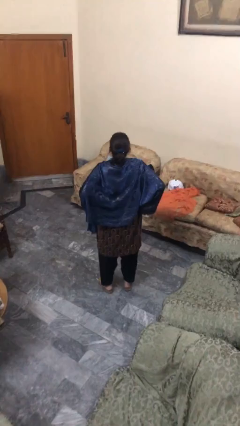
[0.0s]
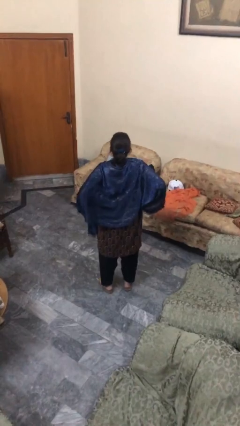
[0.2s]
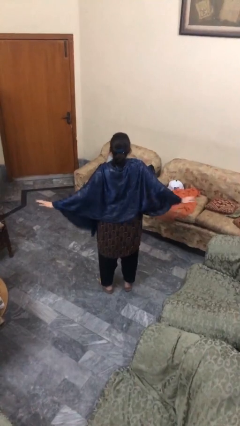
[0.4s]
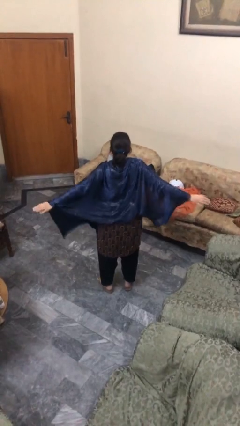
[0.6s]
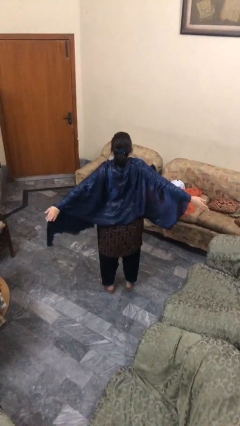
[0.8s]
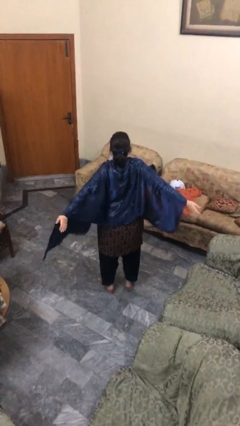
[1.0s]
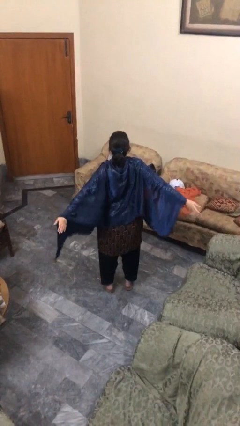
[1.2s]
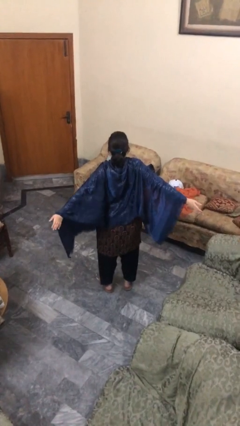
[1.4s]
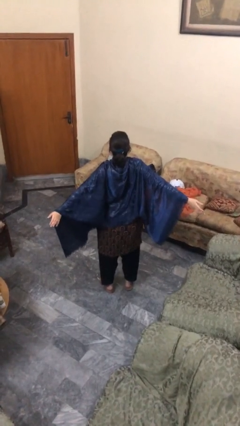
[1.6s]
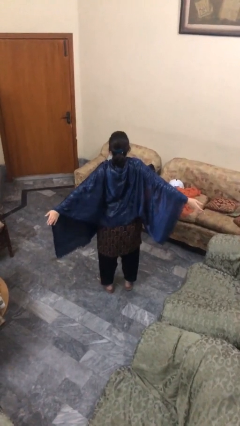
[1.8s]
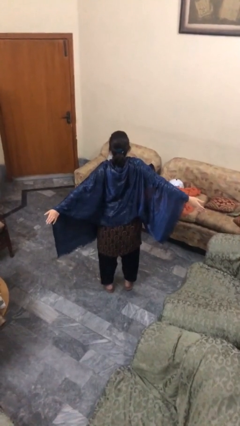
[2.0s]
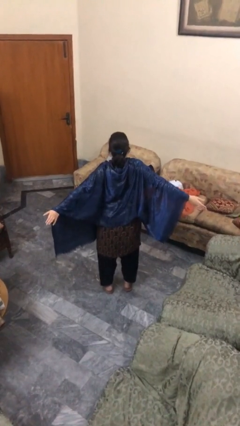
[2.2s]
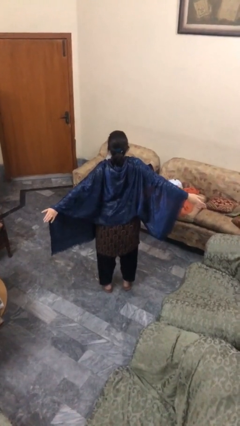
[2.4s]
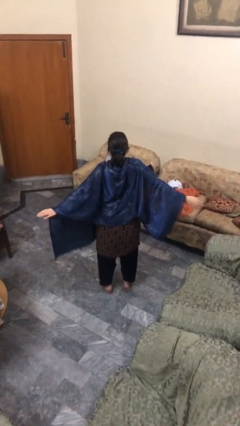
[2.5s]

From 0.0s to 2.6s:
person stretches arms to side

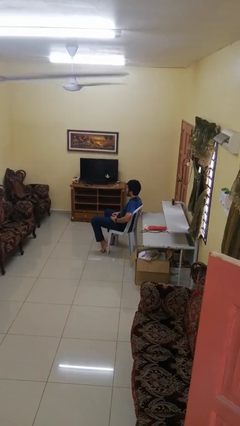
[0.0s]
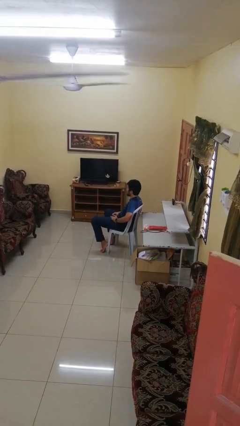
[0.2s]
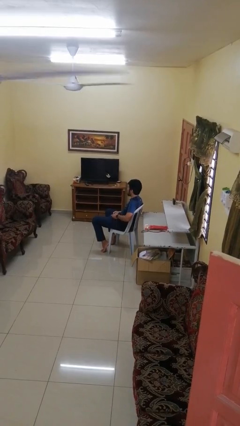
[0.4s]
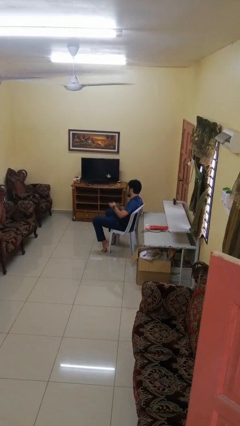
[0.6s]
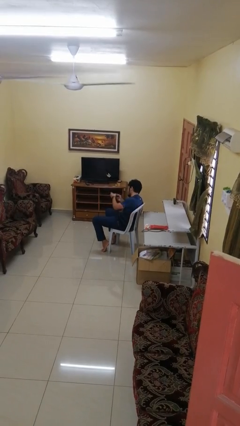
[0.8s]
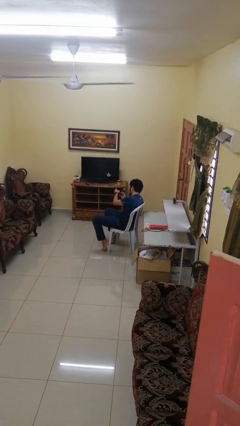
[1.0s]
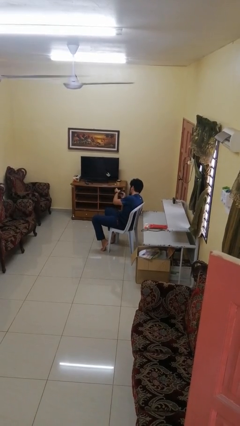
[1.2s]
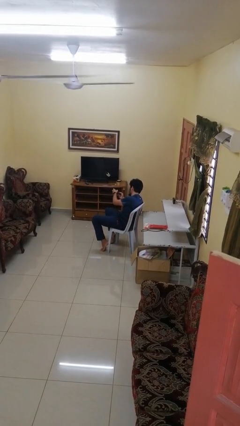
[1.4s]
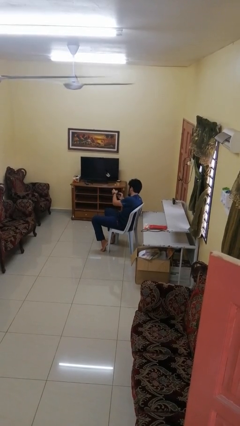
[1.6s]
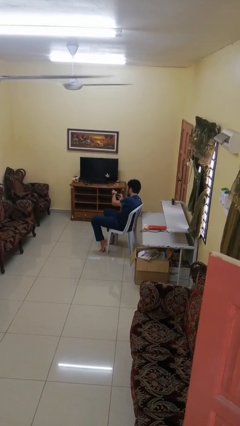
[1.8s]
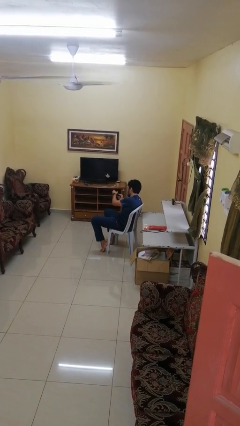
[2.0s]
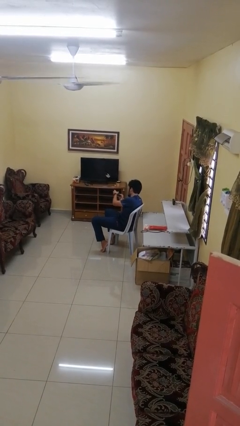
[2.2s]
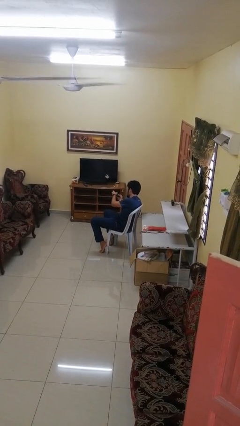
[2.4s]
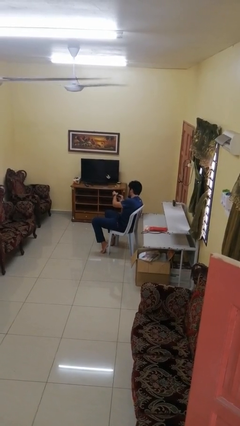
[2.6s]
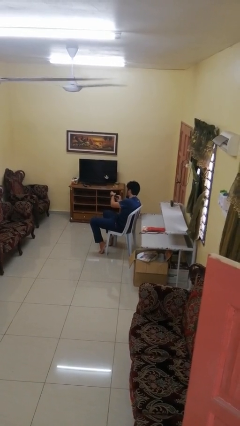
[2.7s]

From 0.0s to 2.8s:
person interacts with handheld game

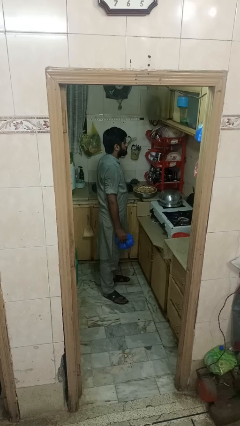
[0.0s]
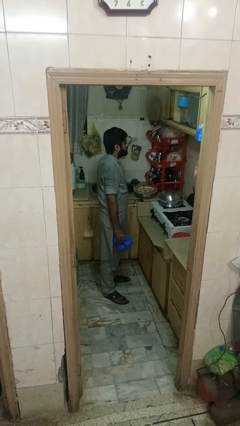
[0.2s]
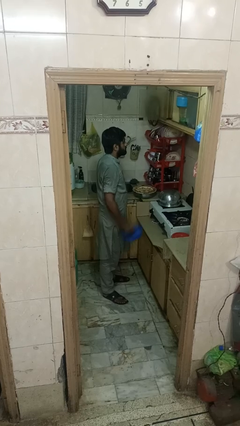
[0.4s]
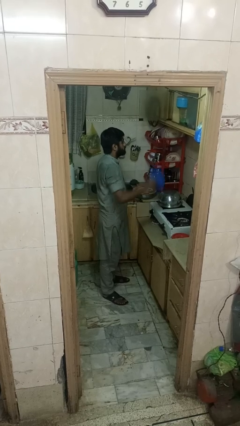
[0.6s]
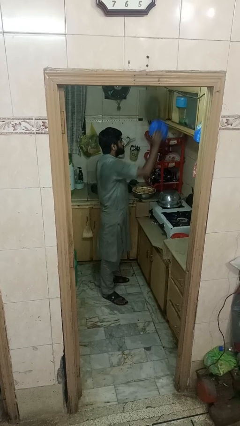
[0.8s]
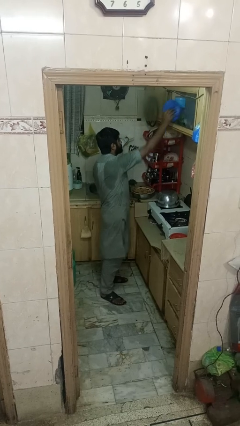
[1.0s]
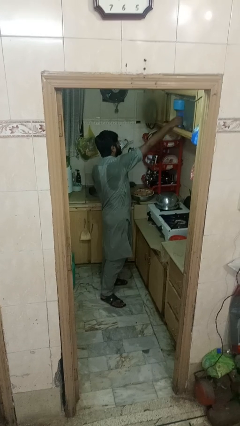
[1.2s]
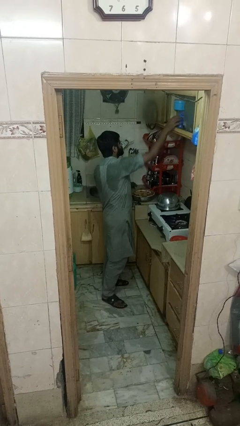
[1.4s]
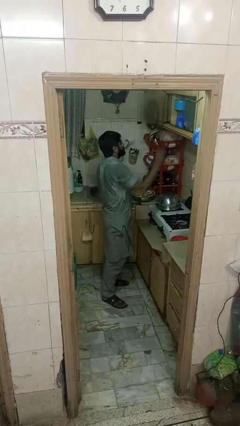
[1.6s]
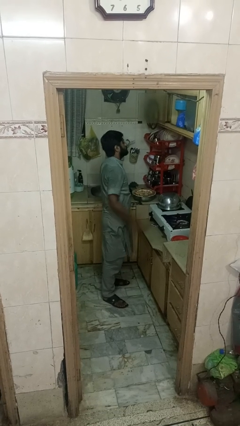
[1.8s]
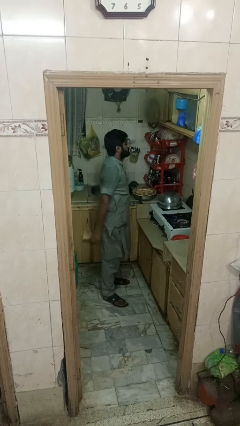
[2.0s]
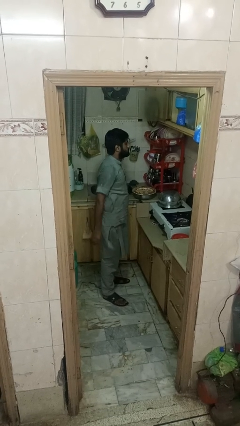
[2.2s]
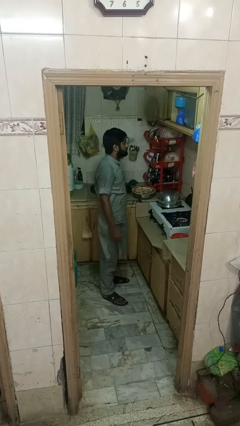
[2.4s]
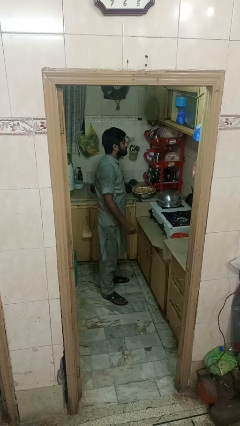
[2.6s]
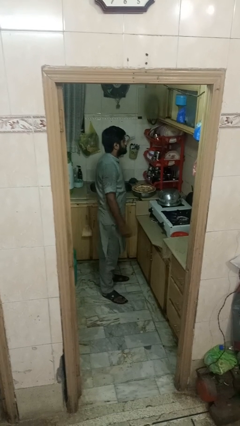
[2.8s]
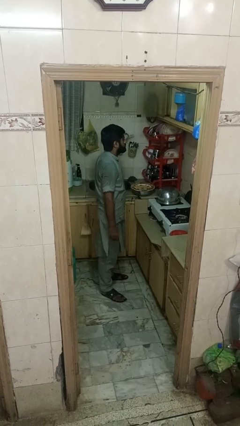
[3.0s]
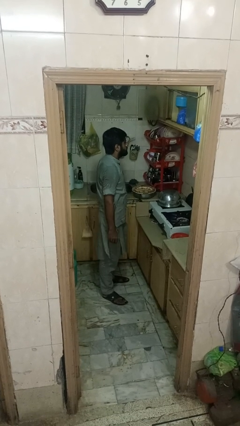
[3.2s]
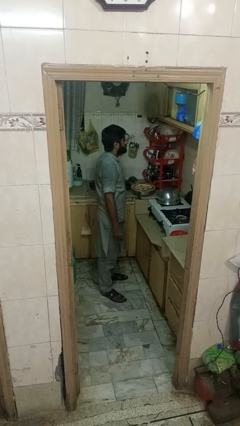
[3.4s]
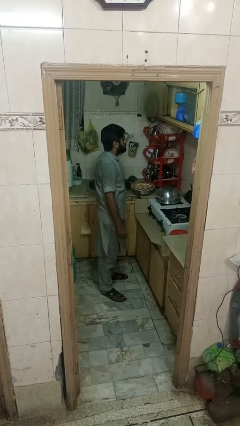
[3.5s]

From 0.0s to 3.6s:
person loads groceries into cabinet

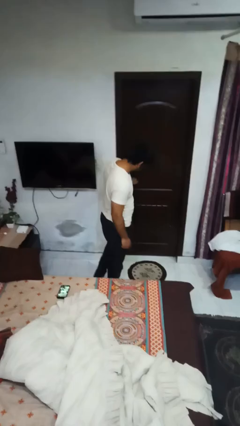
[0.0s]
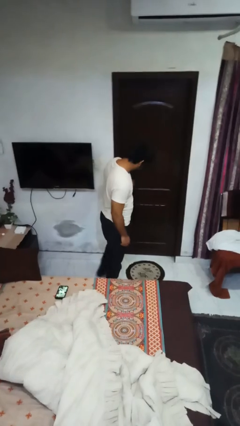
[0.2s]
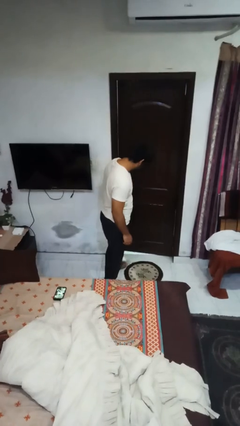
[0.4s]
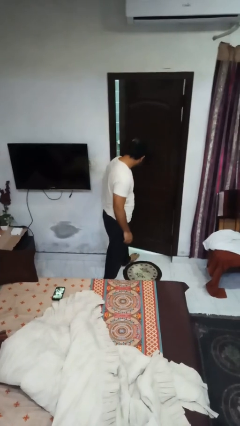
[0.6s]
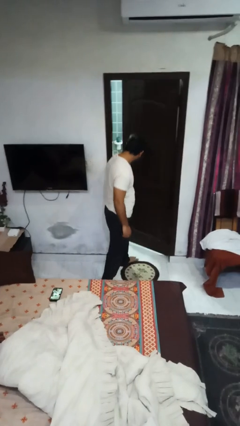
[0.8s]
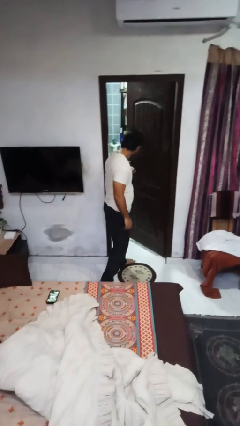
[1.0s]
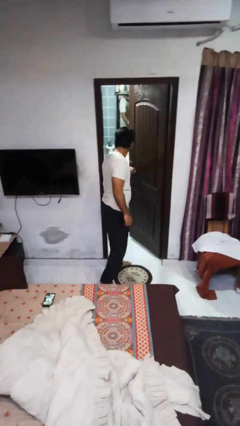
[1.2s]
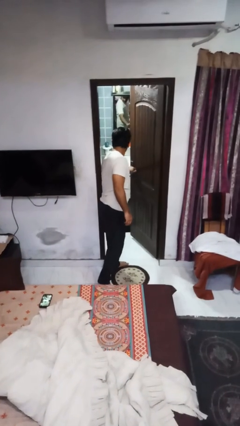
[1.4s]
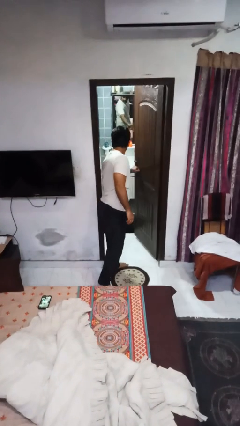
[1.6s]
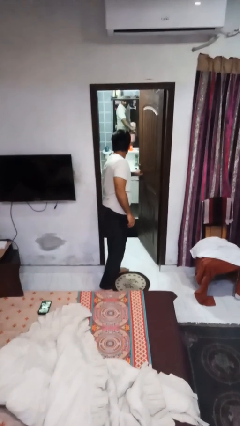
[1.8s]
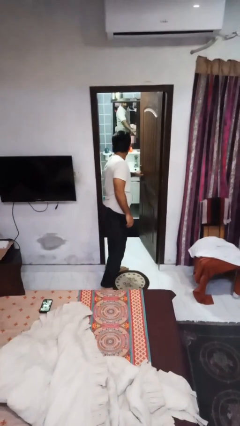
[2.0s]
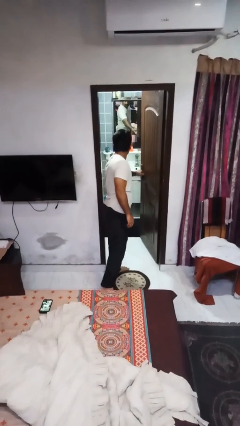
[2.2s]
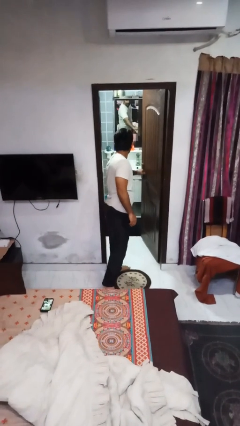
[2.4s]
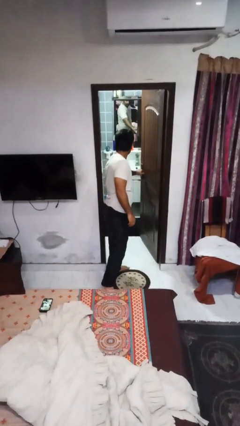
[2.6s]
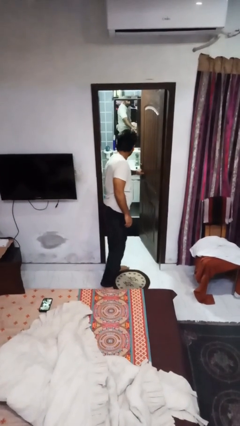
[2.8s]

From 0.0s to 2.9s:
person opens facility door

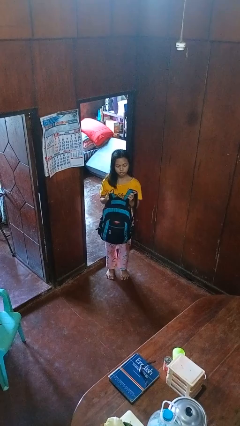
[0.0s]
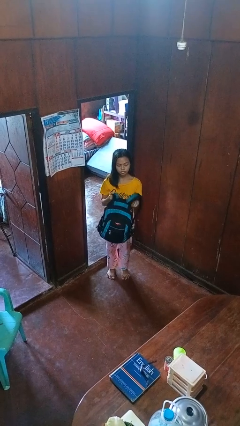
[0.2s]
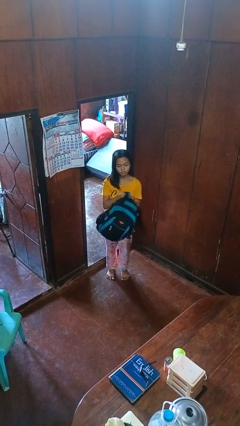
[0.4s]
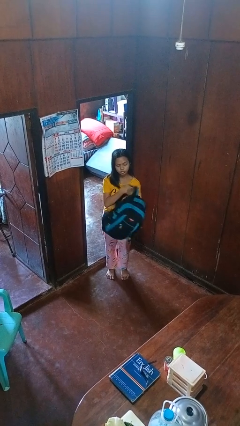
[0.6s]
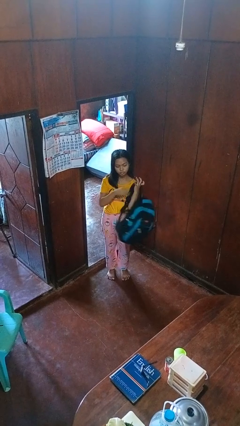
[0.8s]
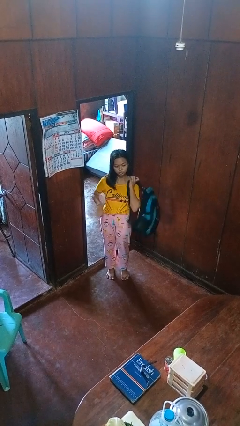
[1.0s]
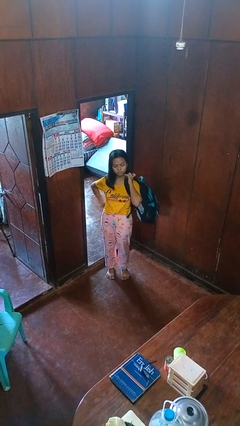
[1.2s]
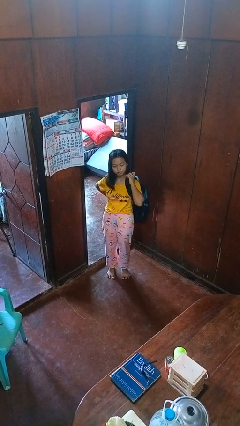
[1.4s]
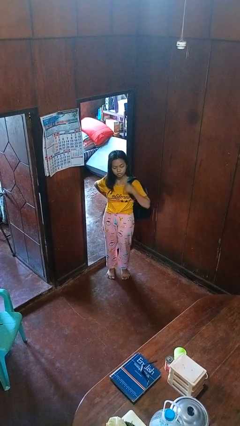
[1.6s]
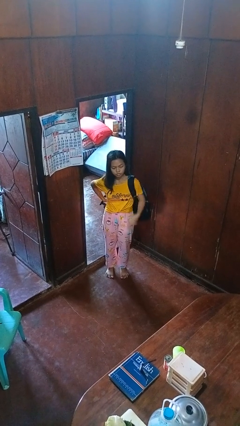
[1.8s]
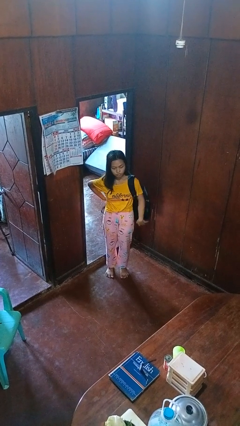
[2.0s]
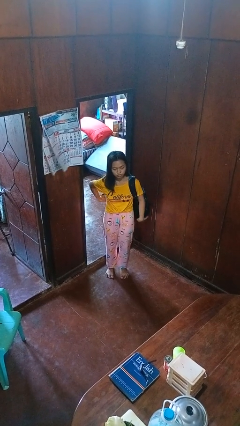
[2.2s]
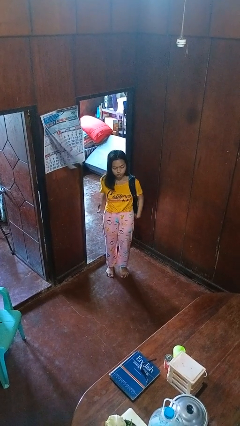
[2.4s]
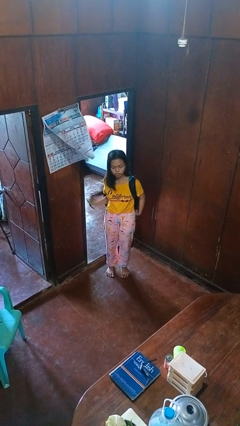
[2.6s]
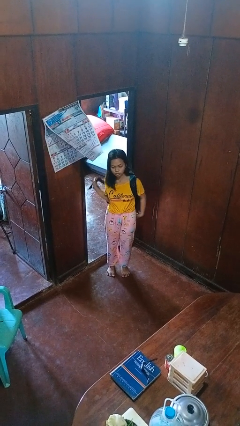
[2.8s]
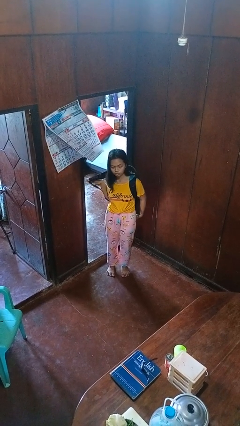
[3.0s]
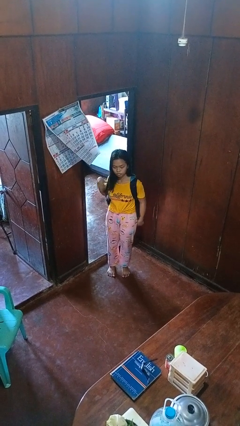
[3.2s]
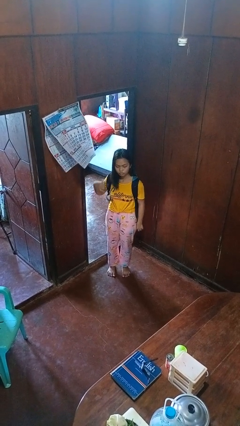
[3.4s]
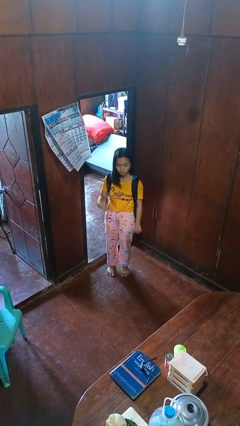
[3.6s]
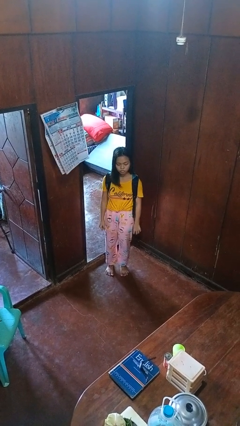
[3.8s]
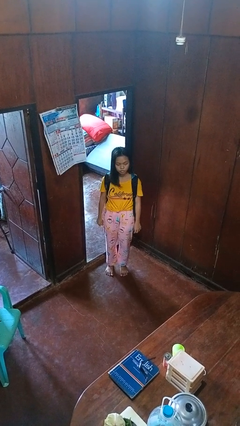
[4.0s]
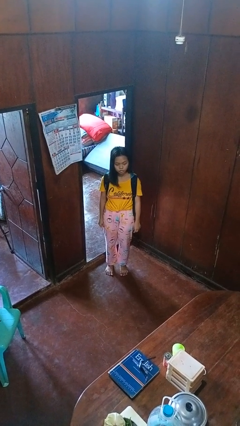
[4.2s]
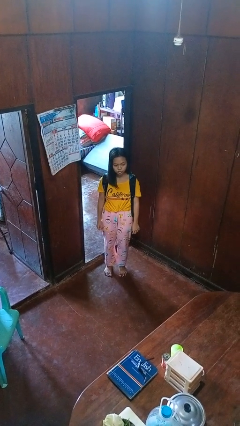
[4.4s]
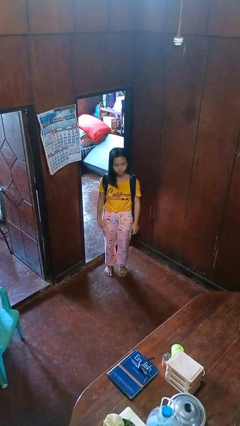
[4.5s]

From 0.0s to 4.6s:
person puts on backpack

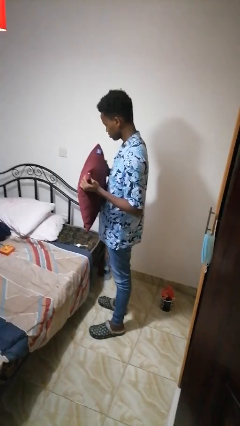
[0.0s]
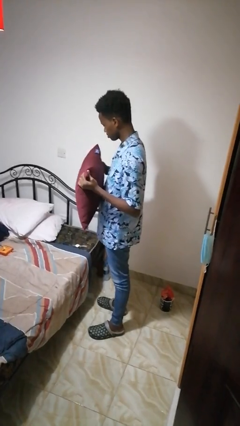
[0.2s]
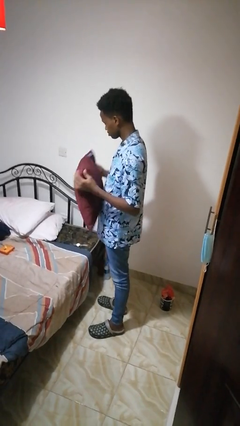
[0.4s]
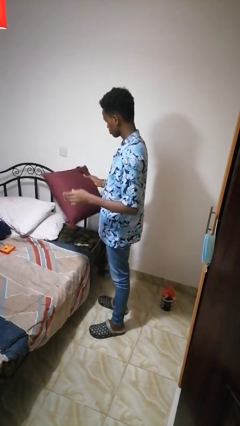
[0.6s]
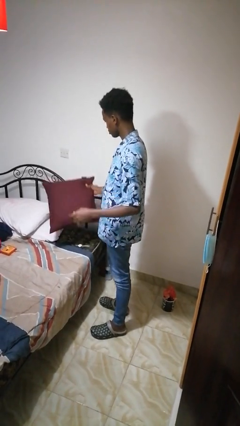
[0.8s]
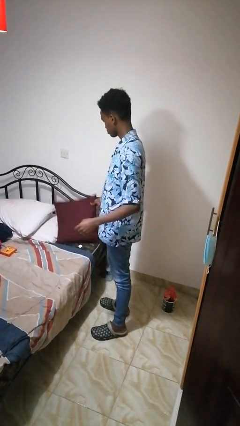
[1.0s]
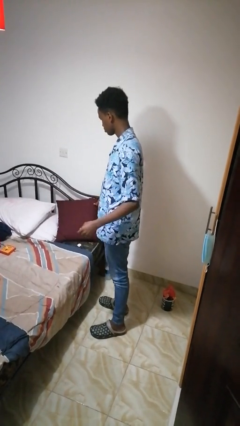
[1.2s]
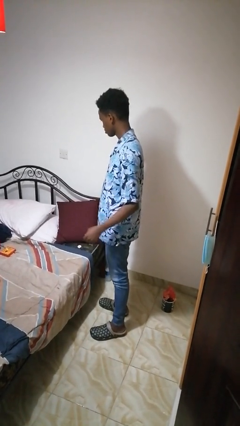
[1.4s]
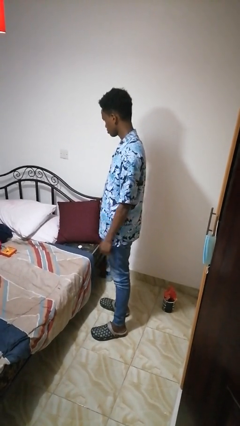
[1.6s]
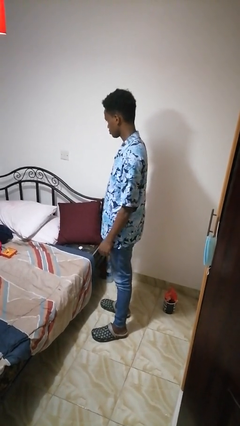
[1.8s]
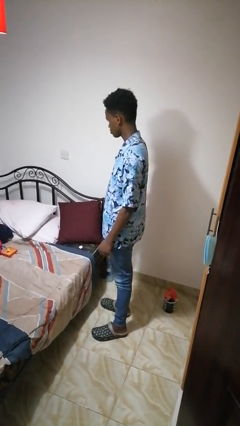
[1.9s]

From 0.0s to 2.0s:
person puts down object on bed
